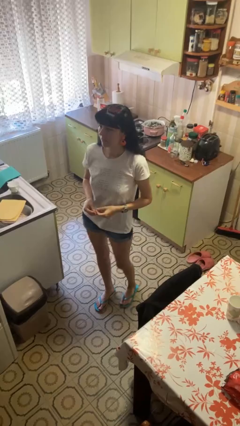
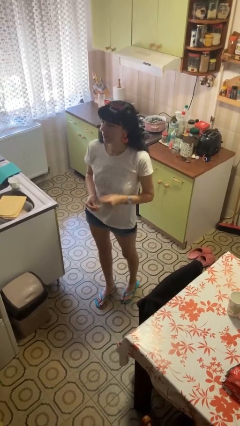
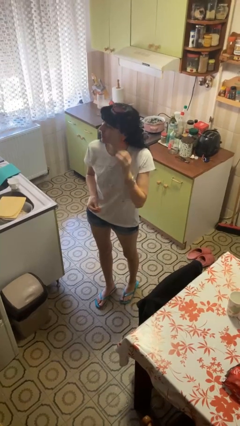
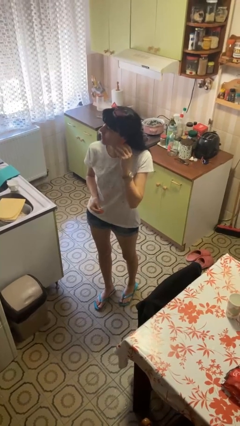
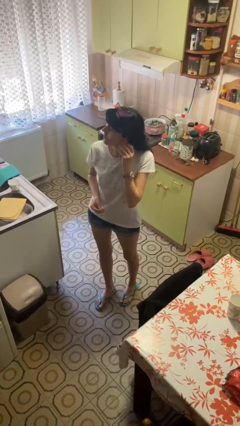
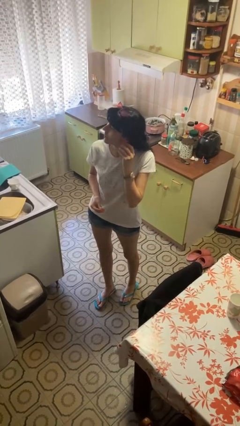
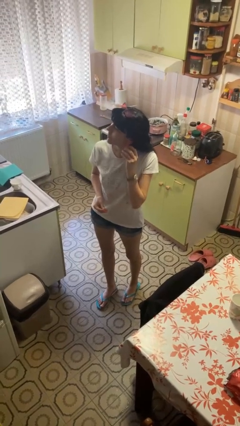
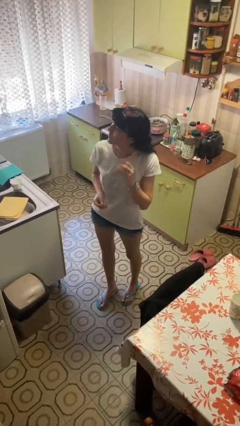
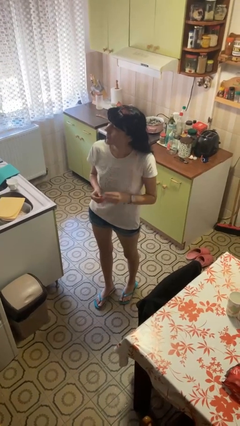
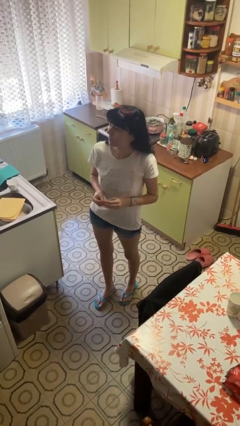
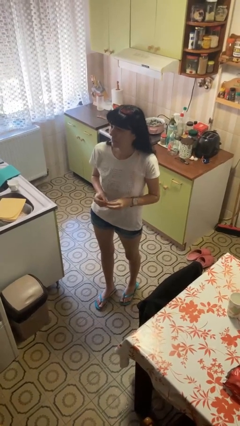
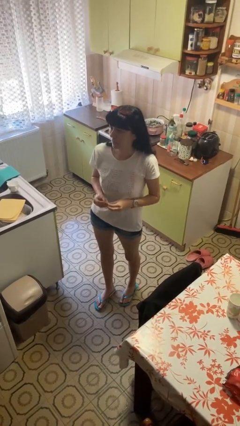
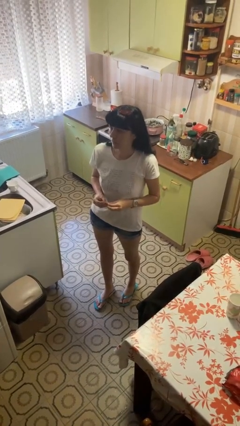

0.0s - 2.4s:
person takes off earrings

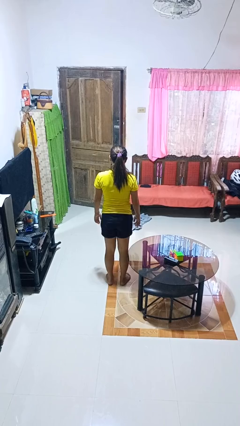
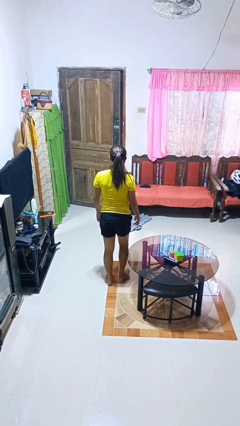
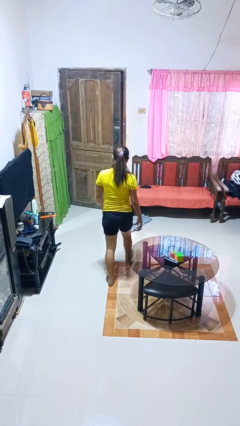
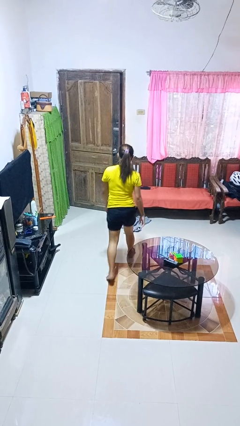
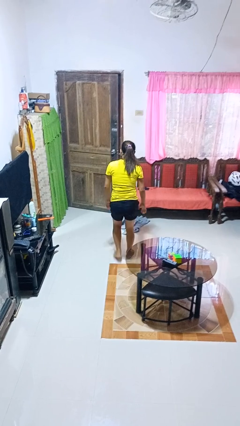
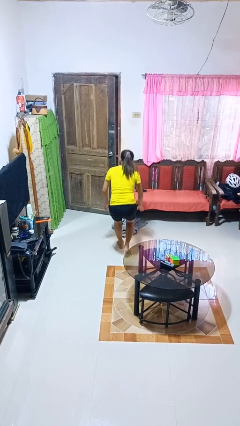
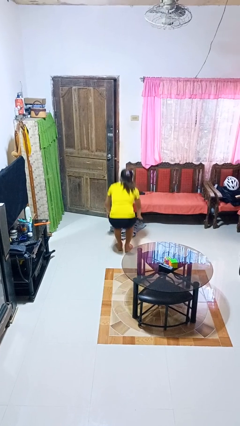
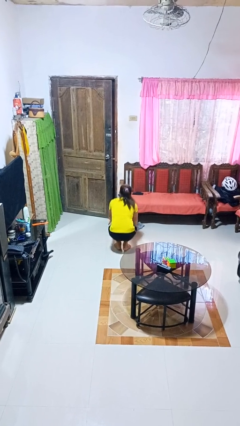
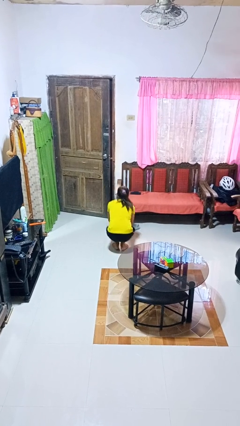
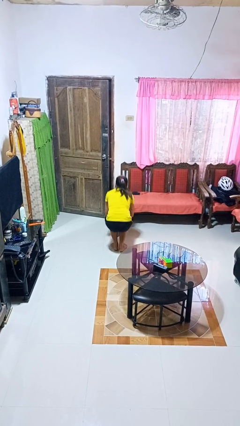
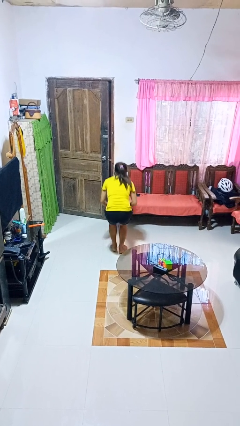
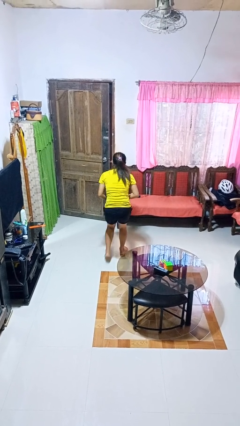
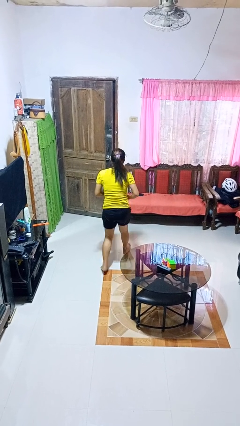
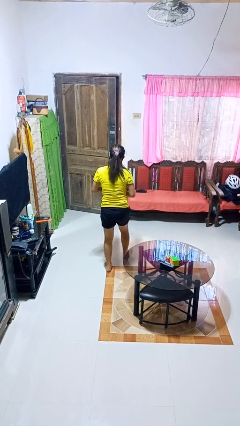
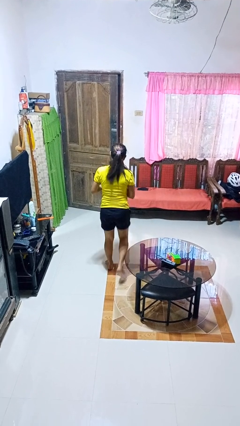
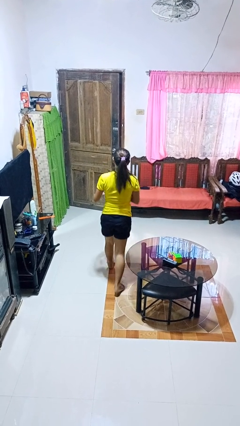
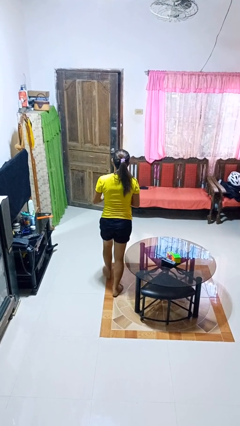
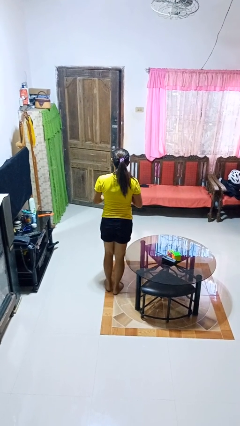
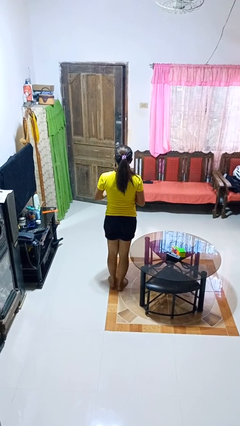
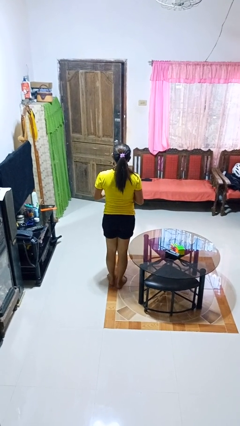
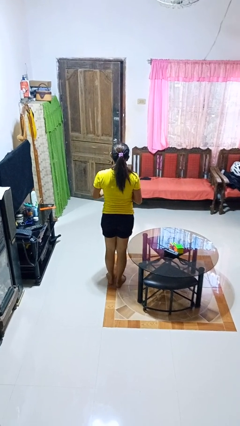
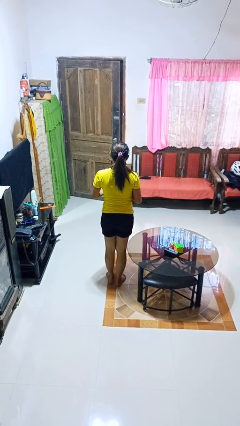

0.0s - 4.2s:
person picks up object from floor

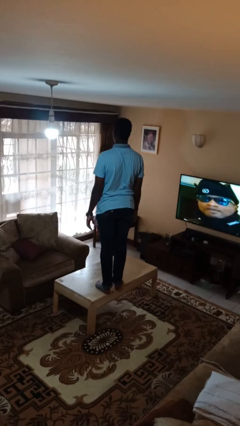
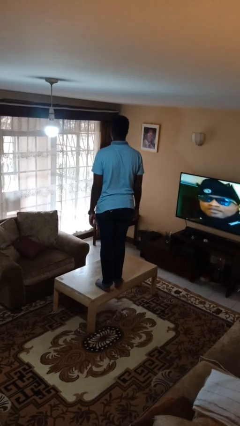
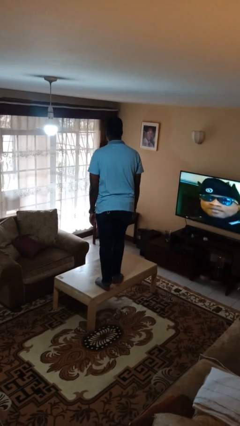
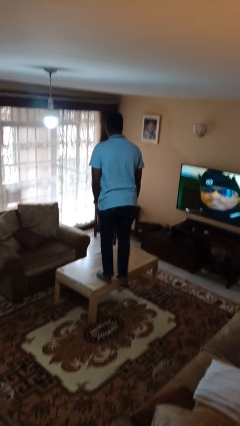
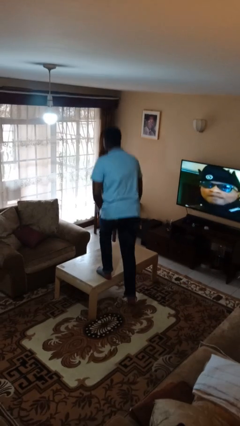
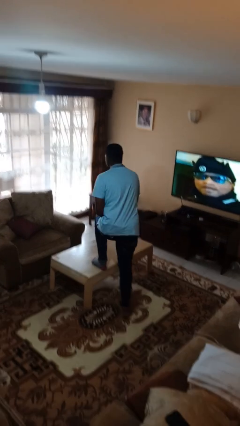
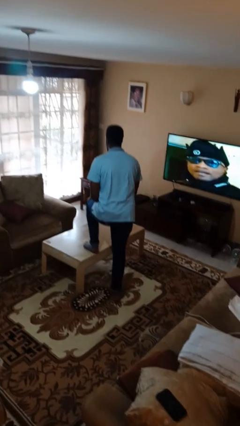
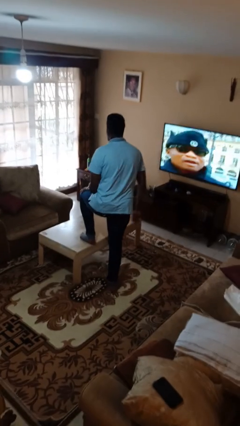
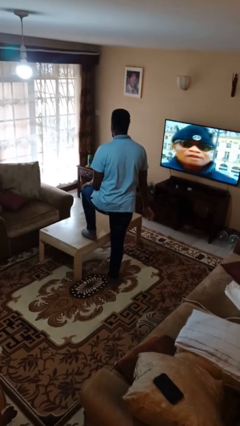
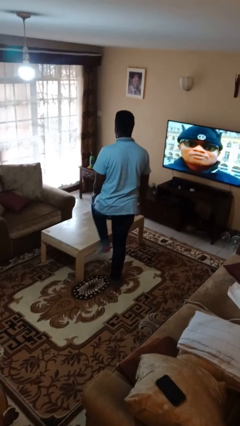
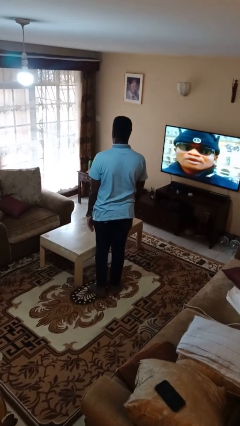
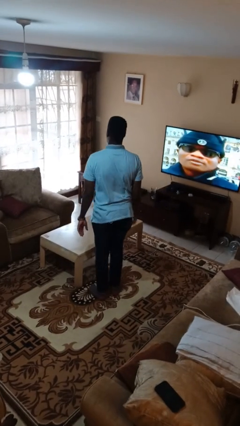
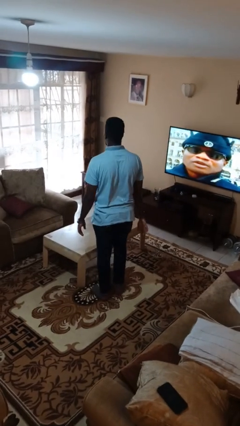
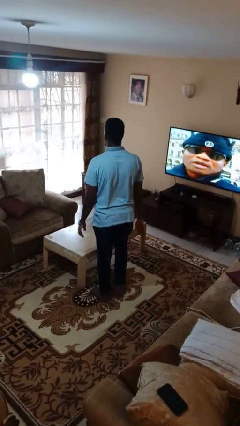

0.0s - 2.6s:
person climbs off table

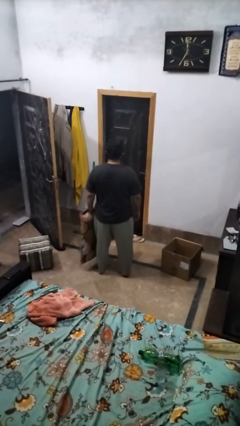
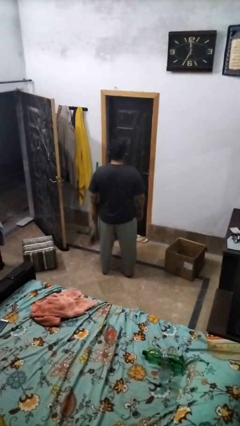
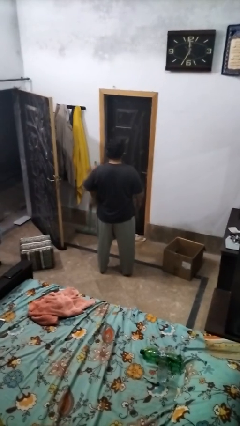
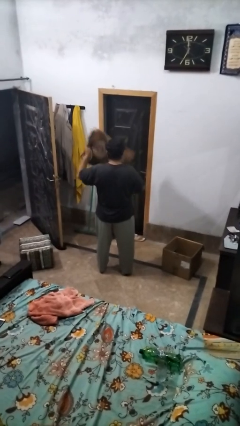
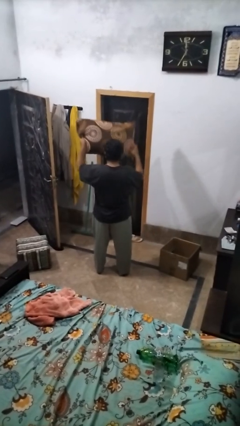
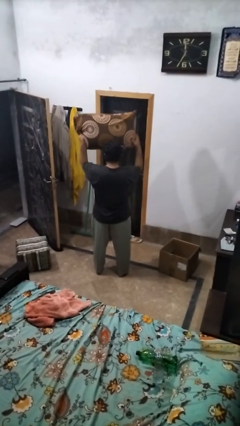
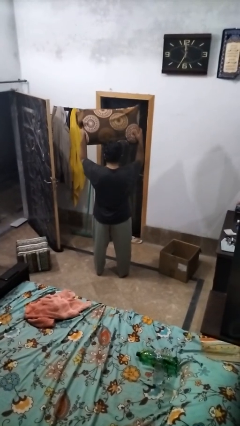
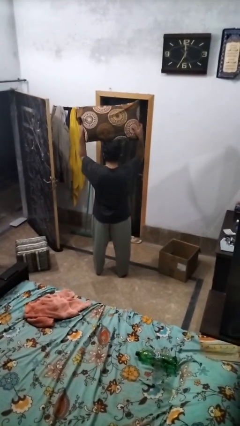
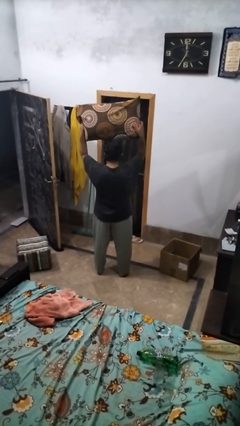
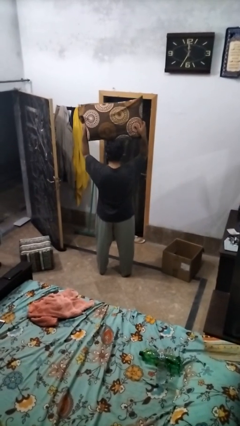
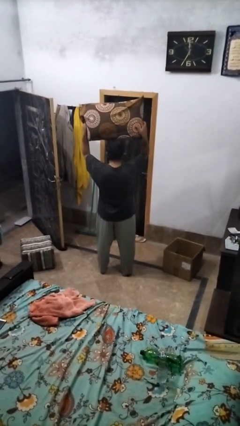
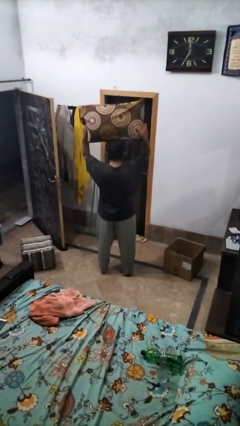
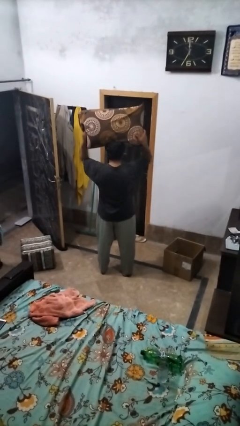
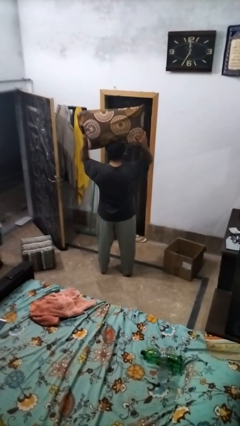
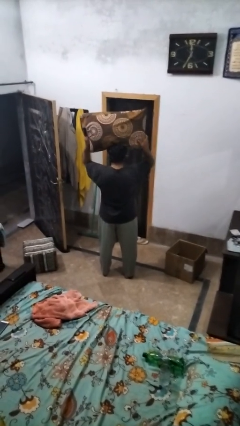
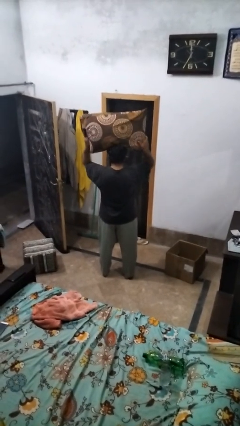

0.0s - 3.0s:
person holds object above head

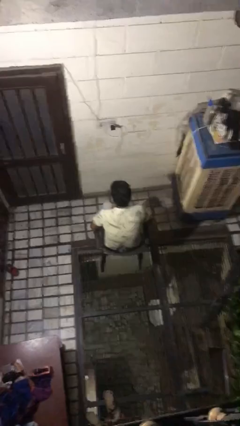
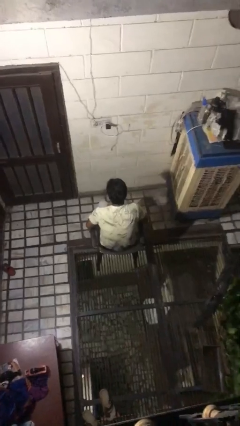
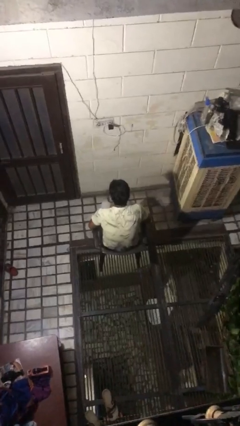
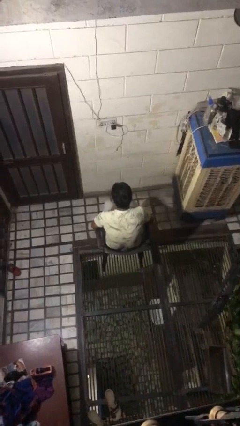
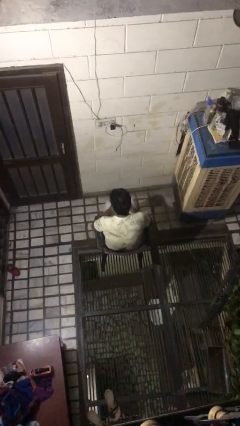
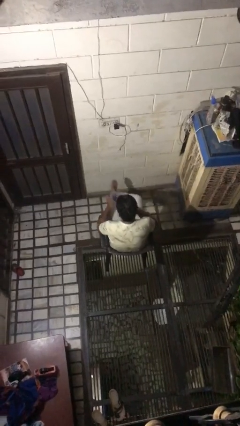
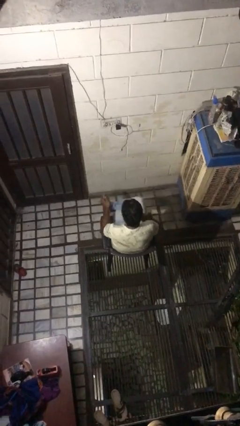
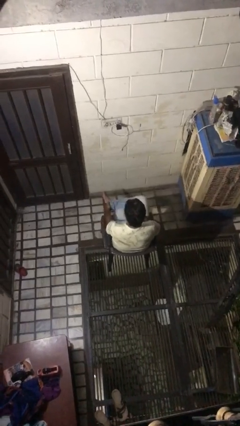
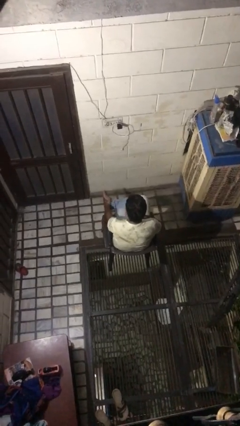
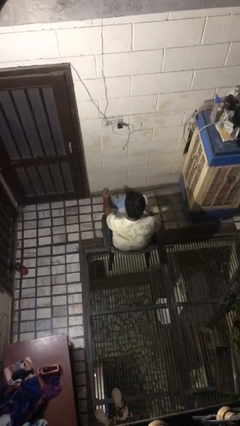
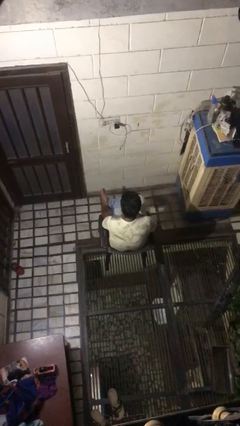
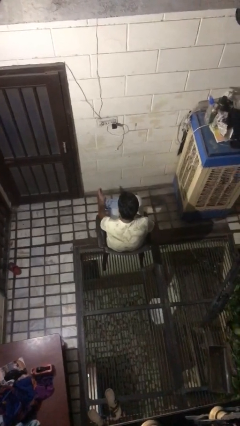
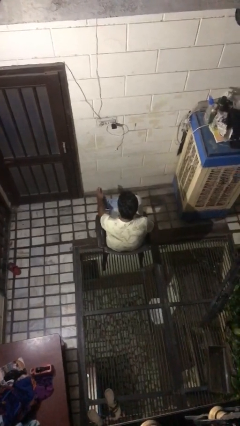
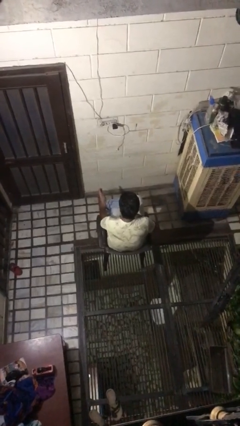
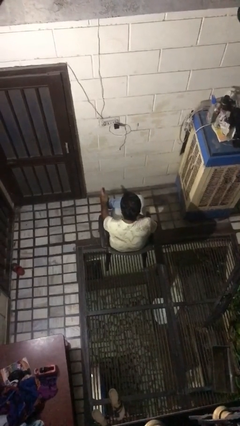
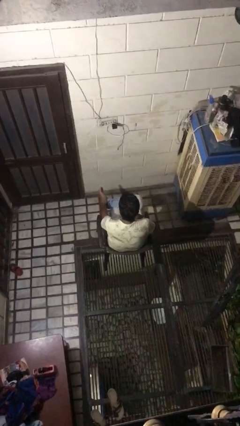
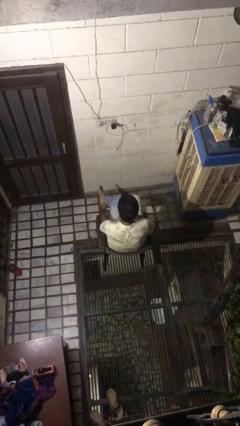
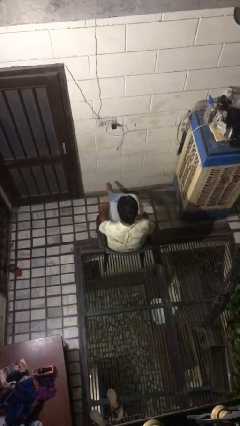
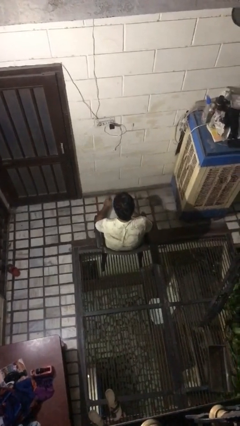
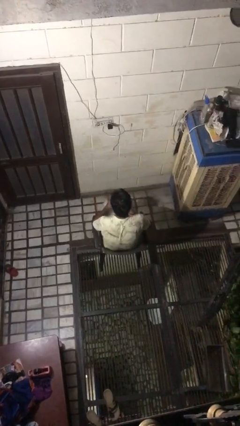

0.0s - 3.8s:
person rubs foot

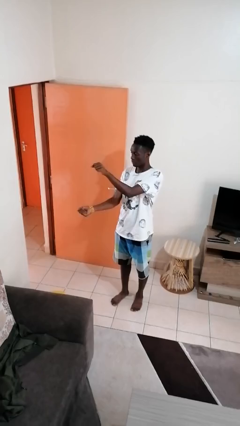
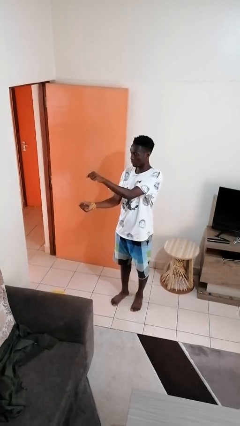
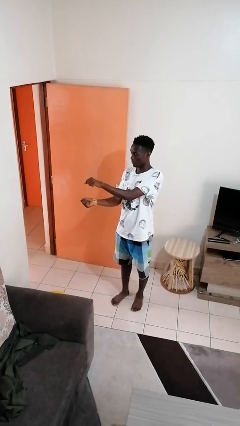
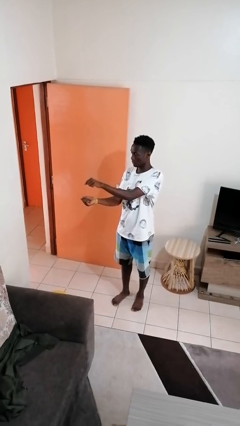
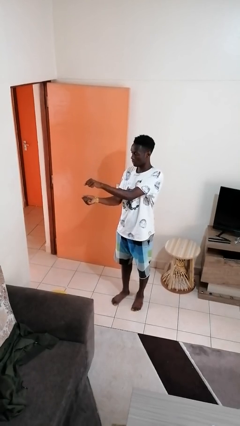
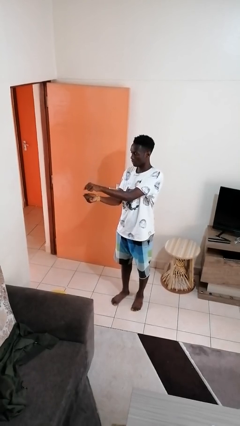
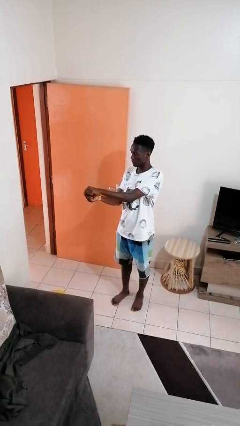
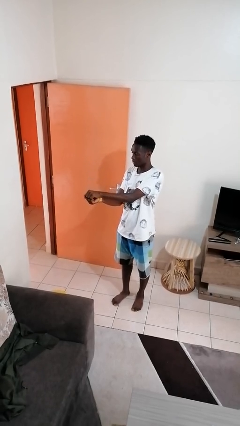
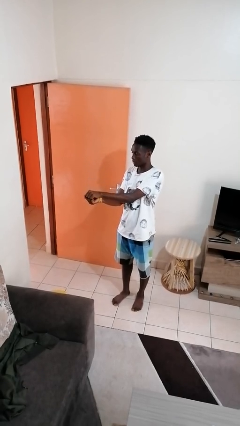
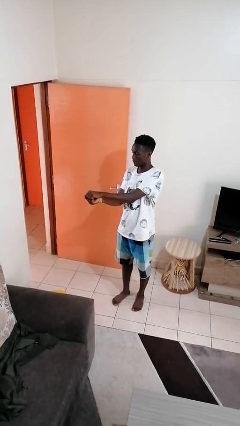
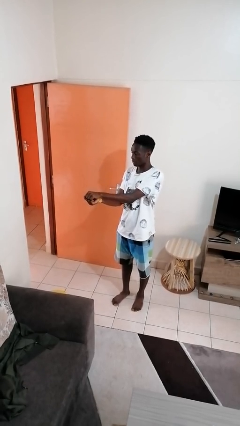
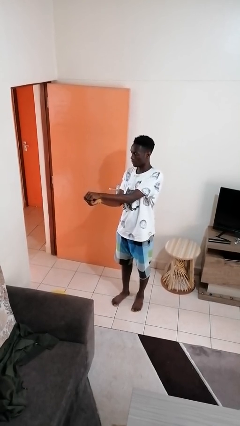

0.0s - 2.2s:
person gestures zoom out
